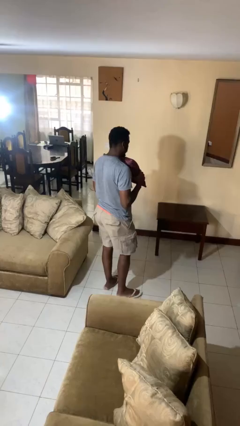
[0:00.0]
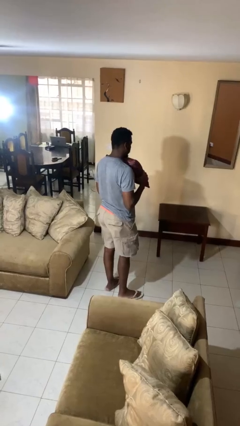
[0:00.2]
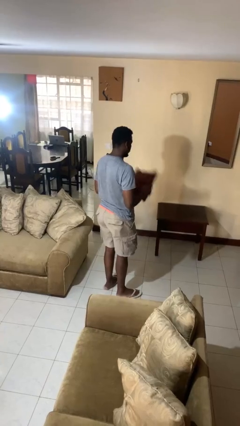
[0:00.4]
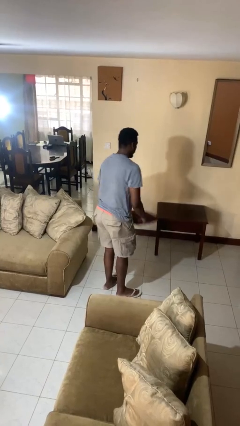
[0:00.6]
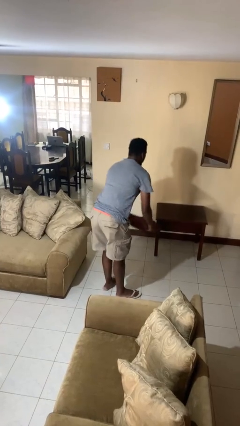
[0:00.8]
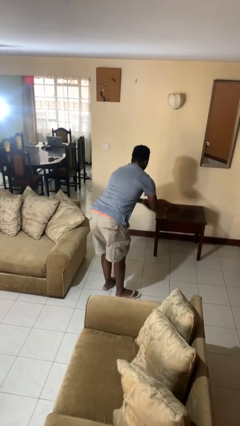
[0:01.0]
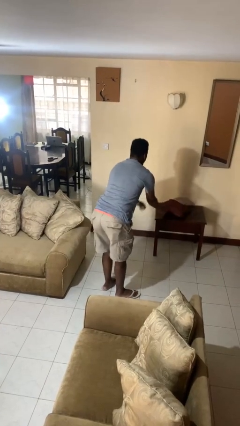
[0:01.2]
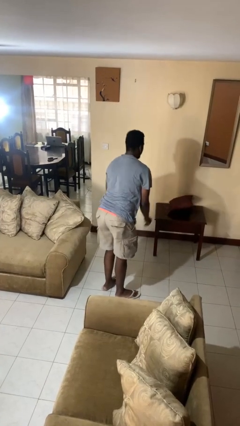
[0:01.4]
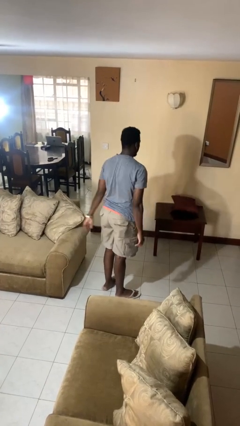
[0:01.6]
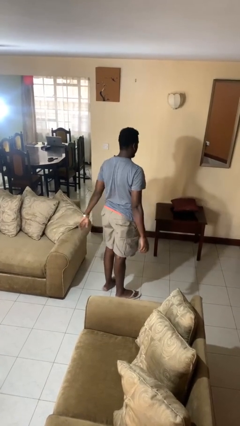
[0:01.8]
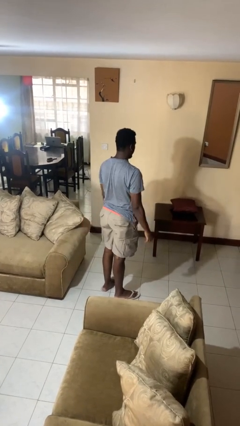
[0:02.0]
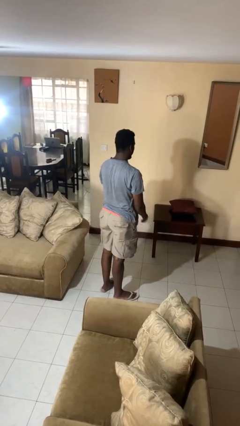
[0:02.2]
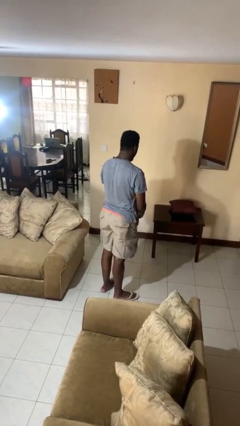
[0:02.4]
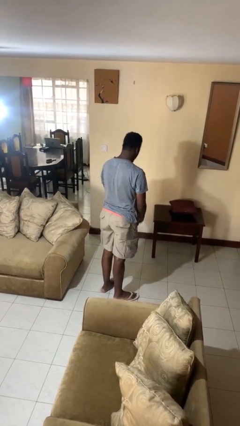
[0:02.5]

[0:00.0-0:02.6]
person throws object on table

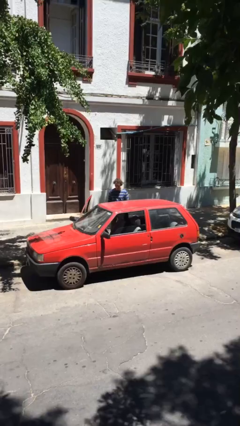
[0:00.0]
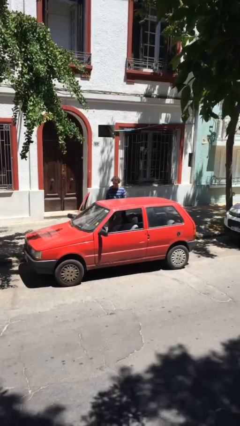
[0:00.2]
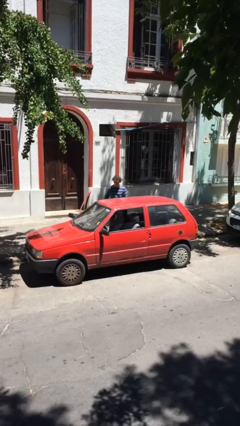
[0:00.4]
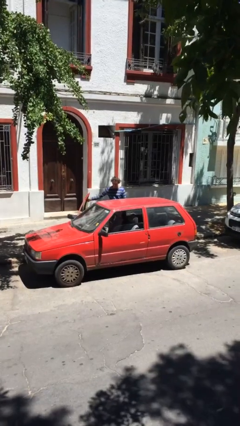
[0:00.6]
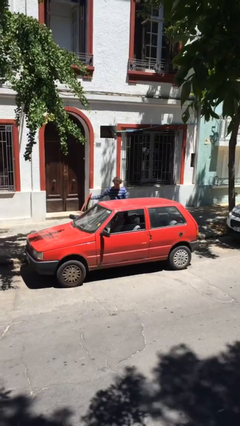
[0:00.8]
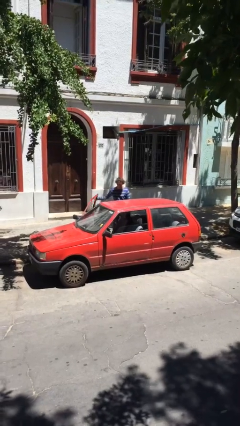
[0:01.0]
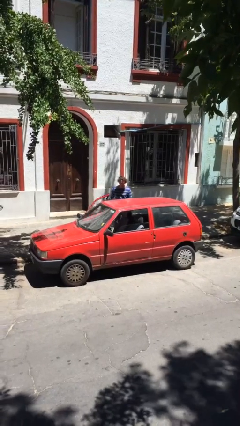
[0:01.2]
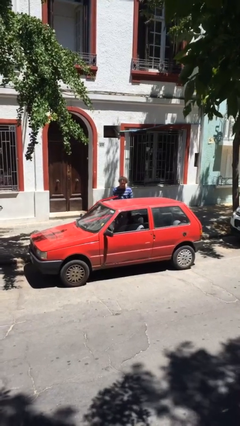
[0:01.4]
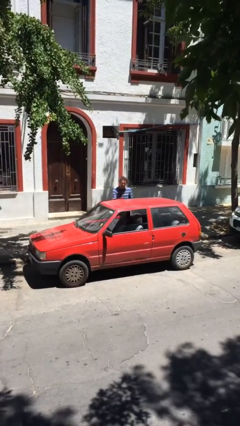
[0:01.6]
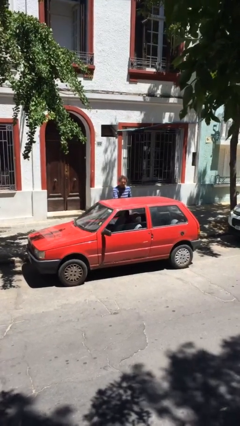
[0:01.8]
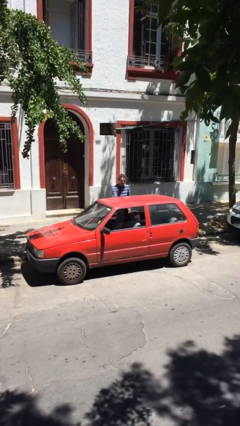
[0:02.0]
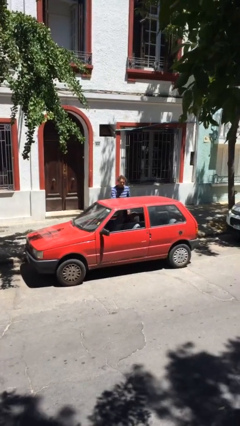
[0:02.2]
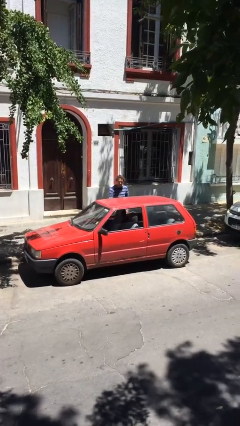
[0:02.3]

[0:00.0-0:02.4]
person closes car door

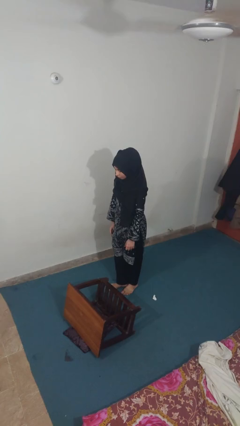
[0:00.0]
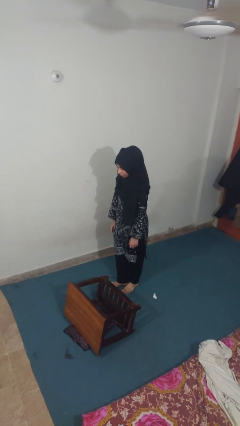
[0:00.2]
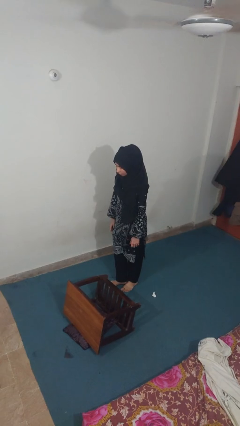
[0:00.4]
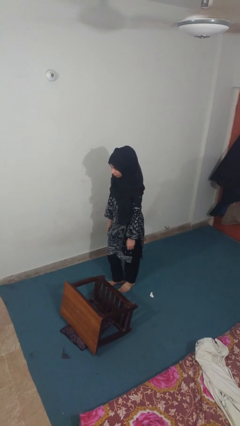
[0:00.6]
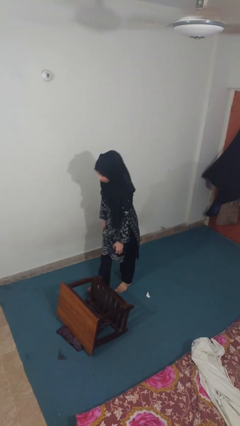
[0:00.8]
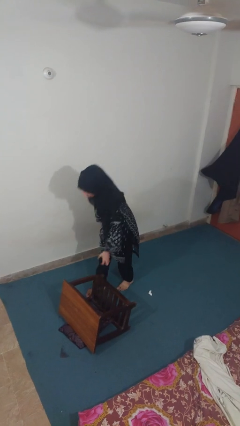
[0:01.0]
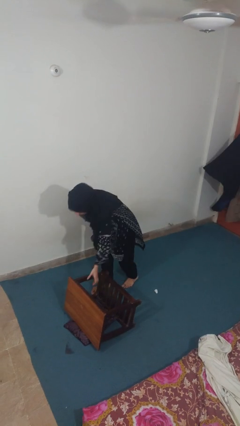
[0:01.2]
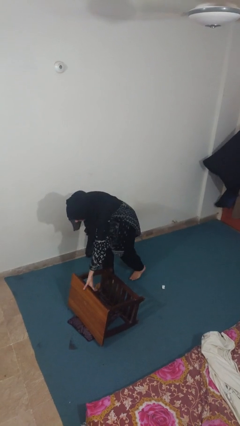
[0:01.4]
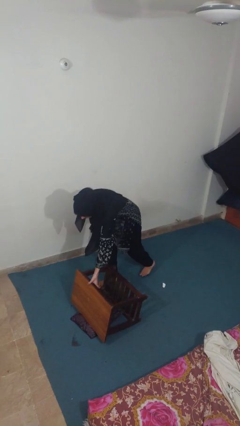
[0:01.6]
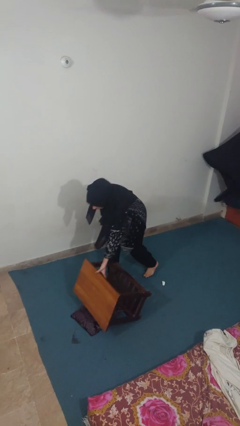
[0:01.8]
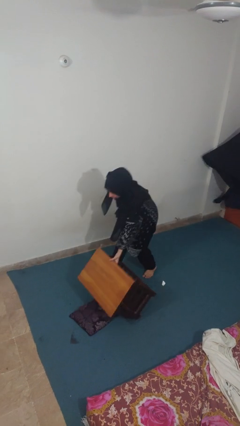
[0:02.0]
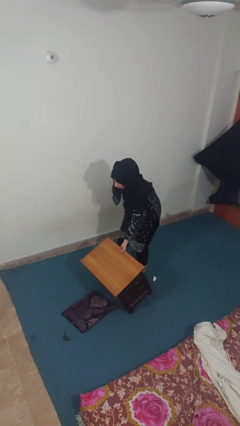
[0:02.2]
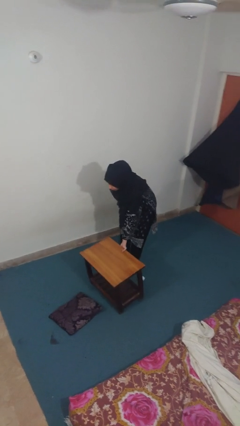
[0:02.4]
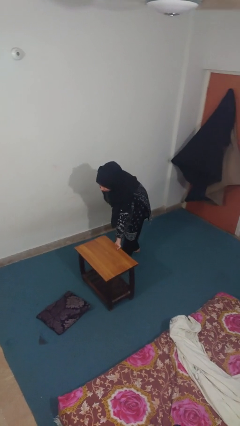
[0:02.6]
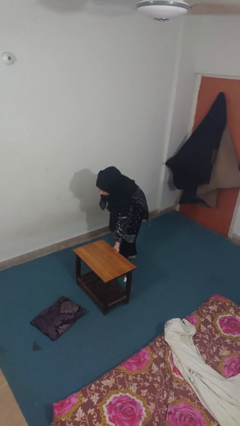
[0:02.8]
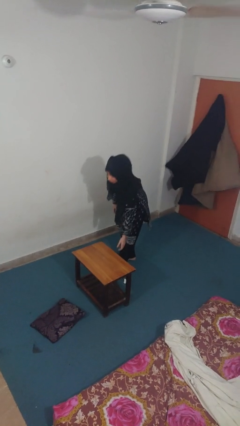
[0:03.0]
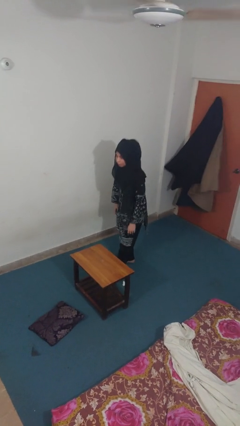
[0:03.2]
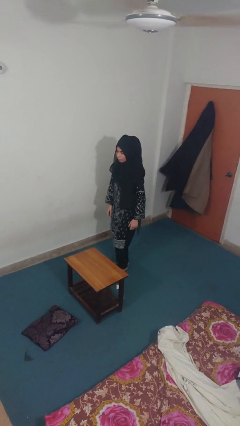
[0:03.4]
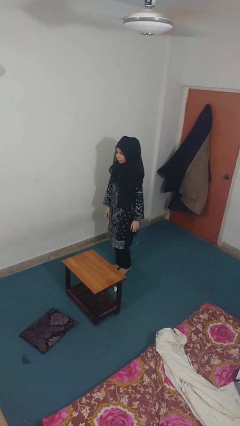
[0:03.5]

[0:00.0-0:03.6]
person sets upright furniture

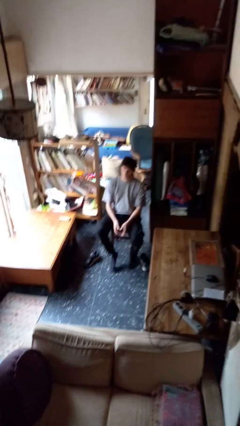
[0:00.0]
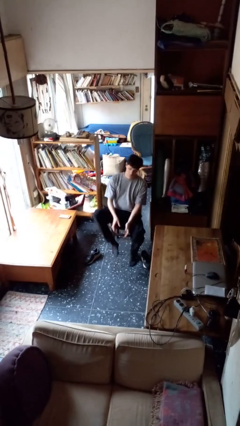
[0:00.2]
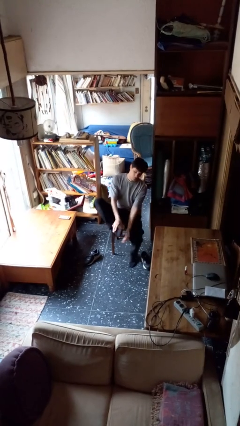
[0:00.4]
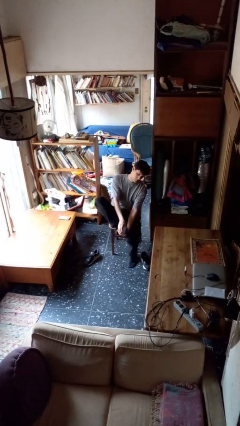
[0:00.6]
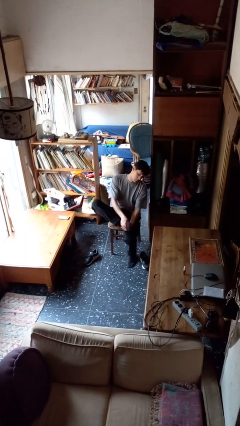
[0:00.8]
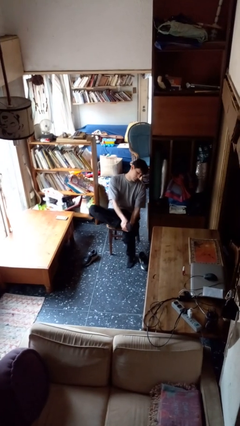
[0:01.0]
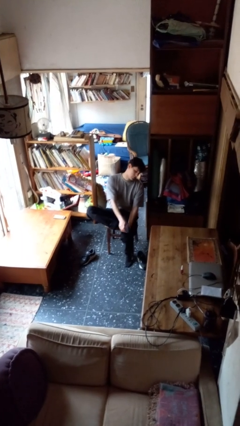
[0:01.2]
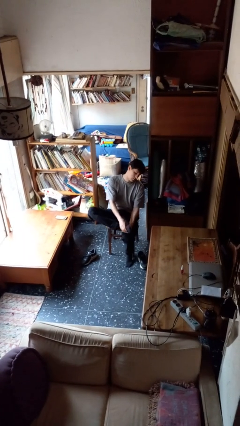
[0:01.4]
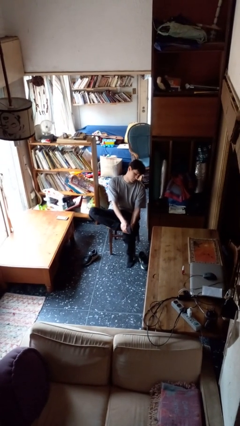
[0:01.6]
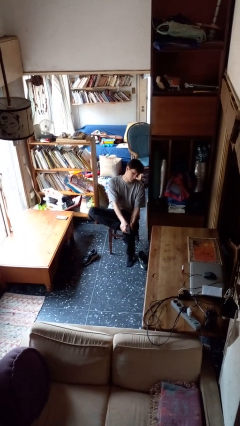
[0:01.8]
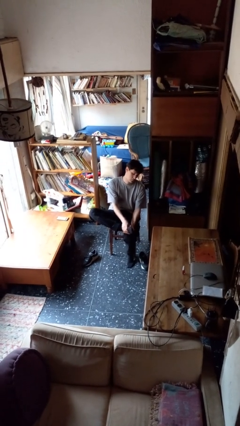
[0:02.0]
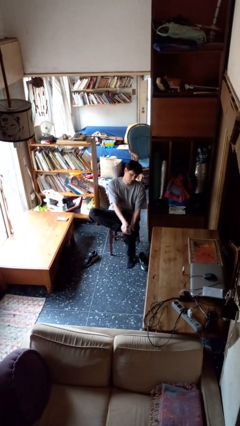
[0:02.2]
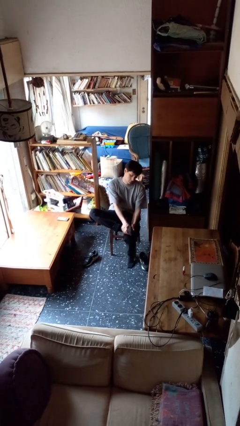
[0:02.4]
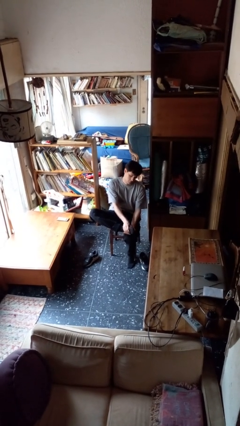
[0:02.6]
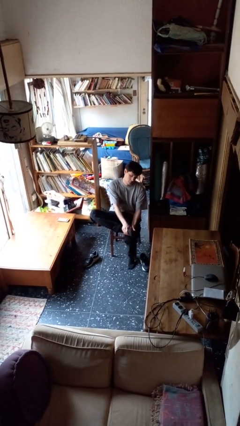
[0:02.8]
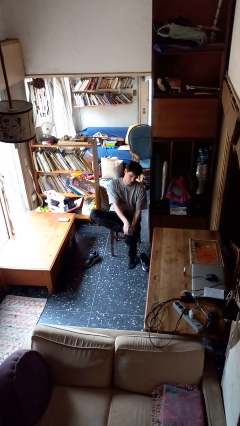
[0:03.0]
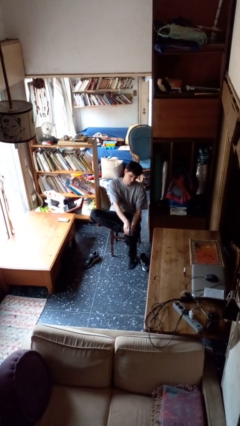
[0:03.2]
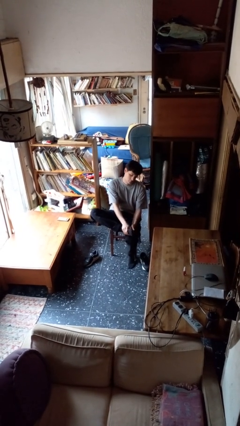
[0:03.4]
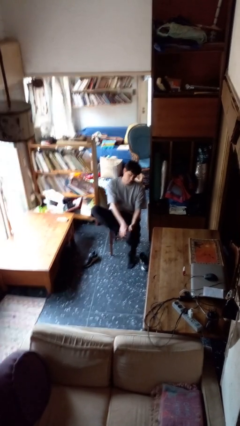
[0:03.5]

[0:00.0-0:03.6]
person rubs foot

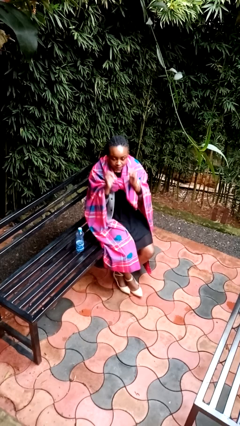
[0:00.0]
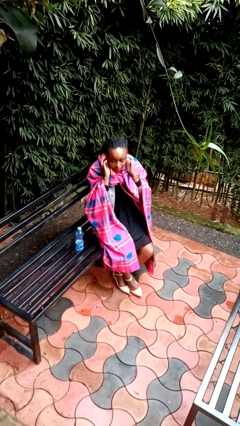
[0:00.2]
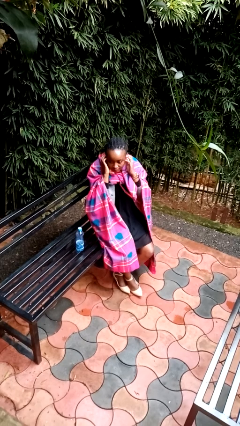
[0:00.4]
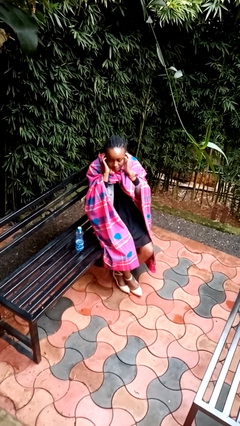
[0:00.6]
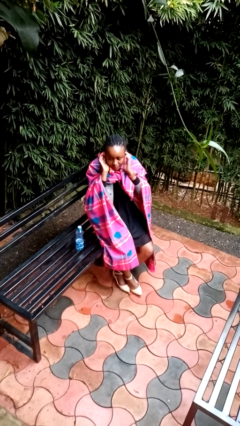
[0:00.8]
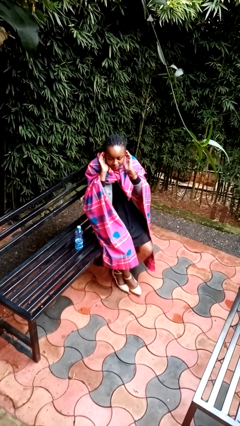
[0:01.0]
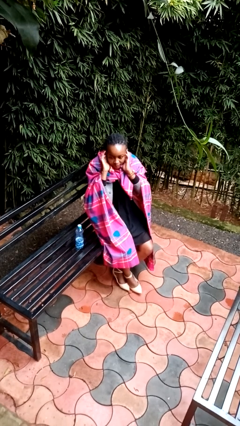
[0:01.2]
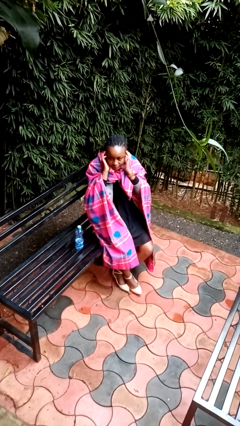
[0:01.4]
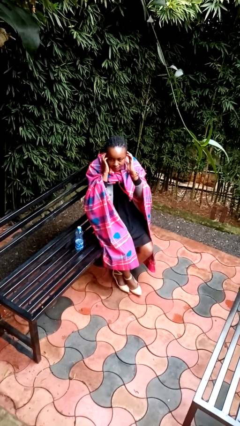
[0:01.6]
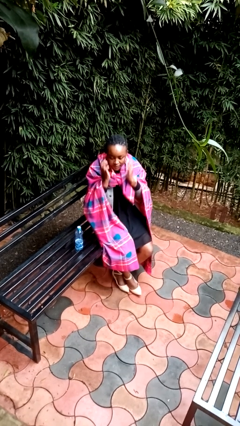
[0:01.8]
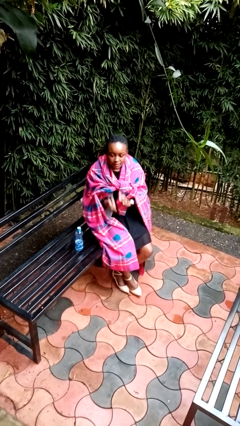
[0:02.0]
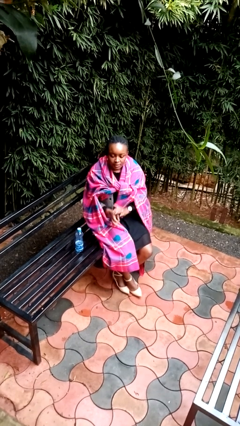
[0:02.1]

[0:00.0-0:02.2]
person puts fingers in ear

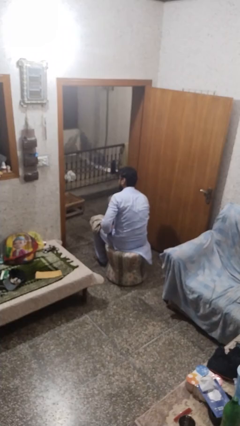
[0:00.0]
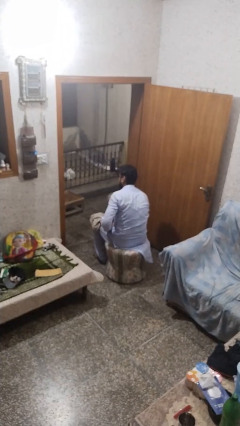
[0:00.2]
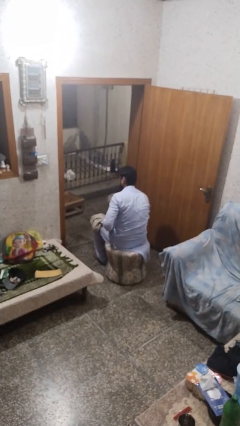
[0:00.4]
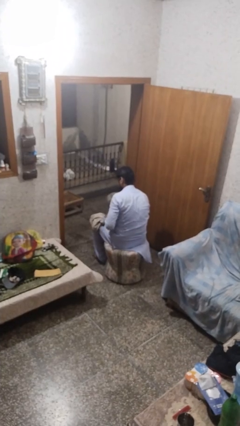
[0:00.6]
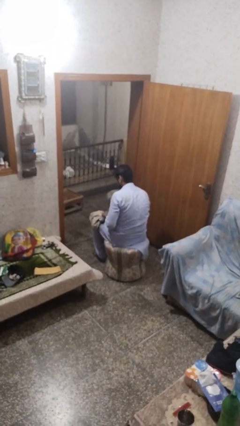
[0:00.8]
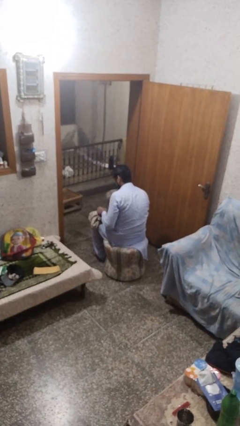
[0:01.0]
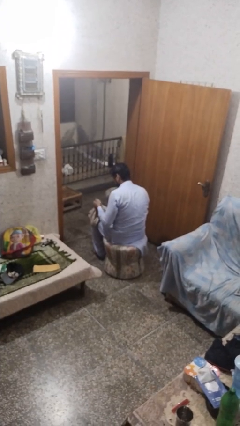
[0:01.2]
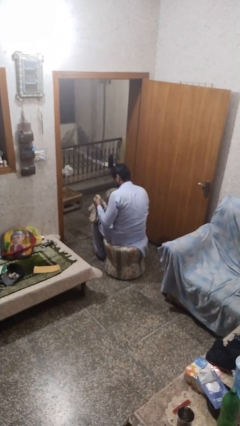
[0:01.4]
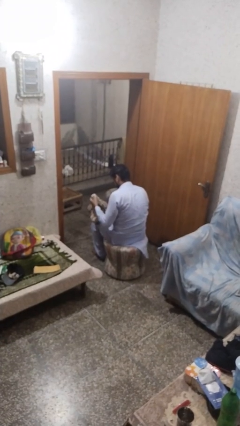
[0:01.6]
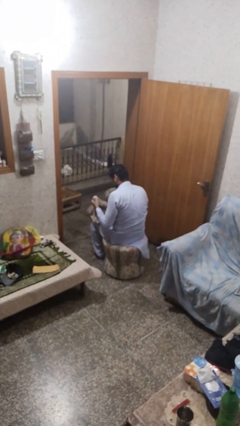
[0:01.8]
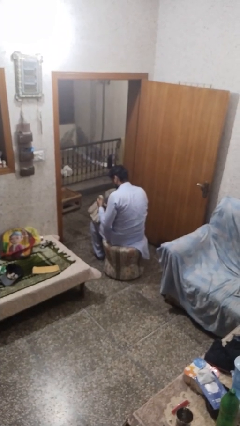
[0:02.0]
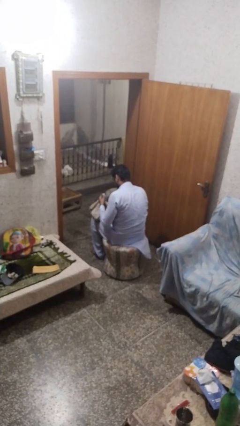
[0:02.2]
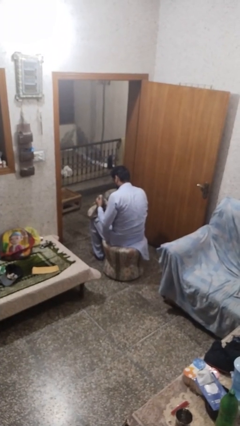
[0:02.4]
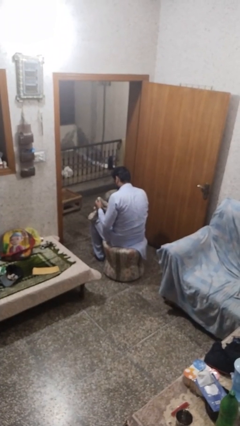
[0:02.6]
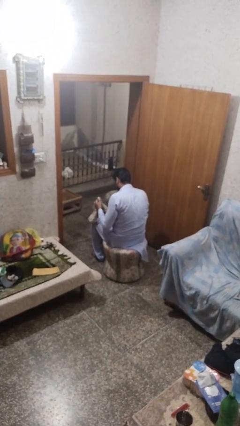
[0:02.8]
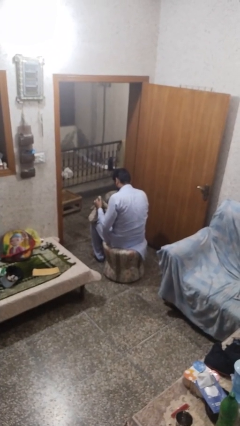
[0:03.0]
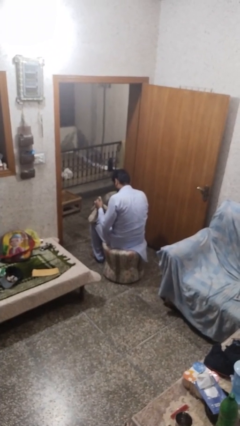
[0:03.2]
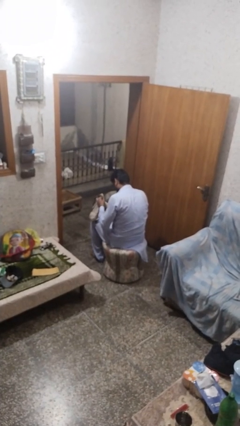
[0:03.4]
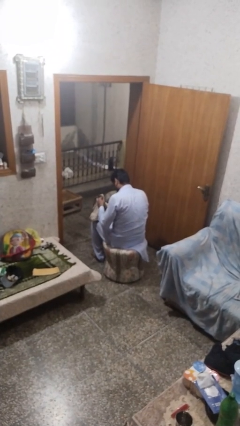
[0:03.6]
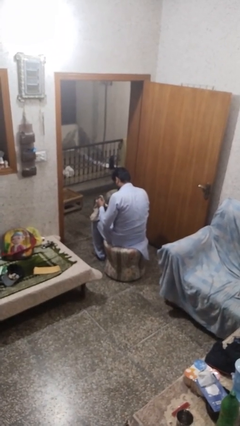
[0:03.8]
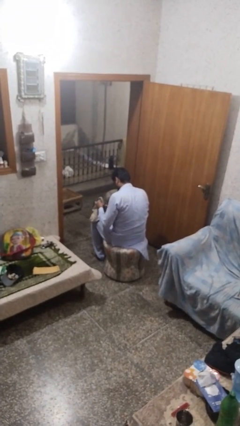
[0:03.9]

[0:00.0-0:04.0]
person searches in purse
